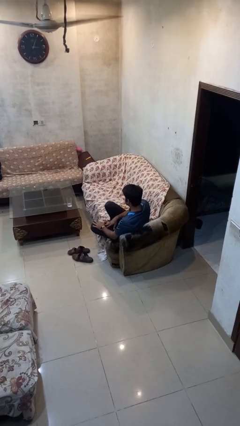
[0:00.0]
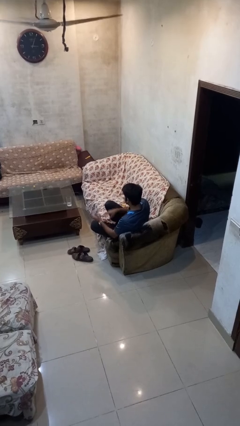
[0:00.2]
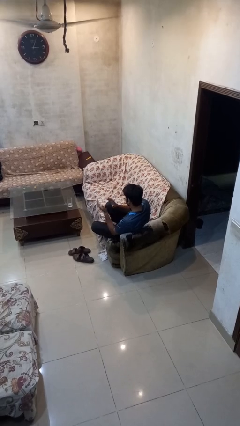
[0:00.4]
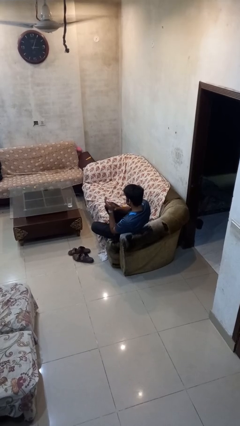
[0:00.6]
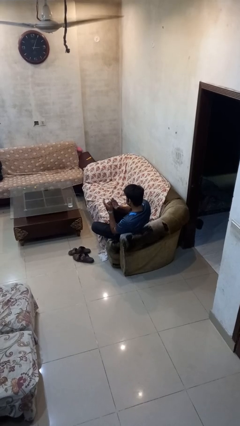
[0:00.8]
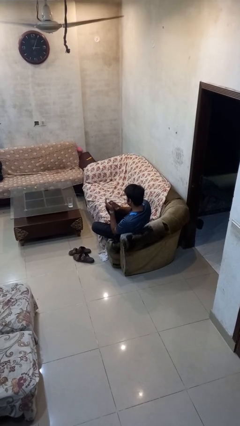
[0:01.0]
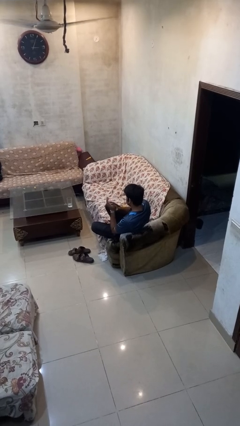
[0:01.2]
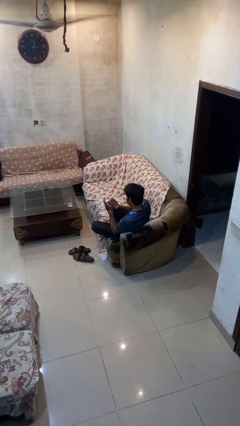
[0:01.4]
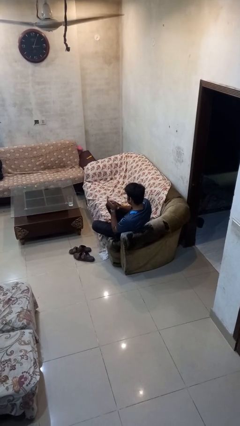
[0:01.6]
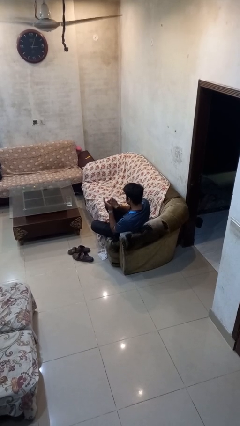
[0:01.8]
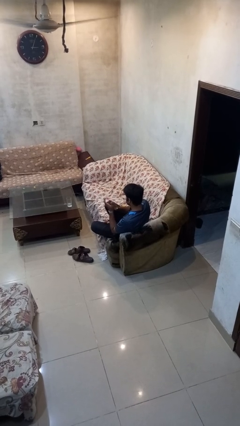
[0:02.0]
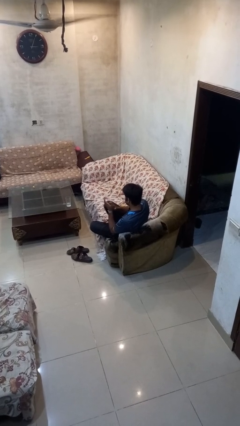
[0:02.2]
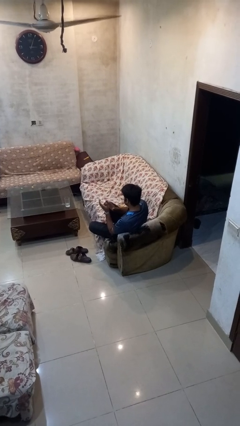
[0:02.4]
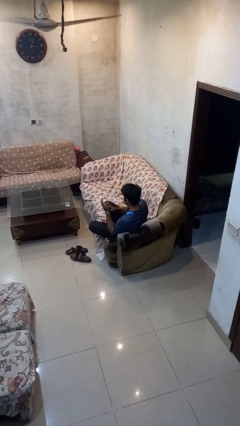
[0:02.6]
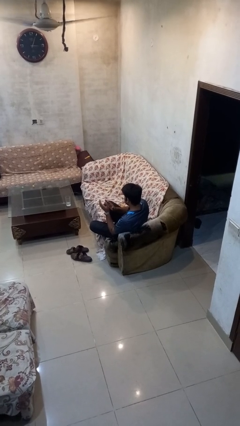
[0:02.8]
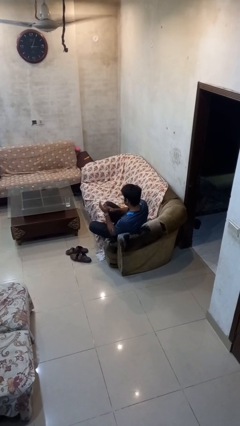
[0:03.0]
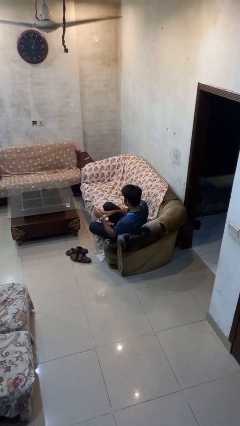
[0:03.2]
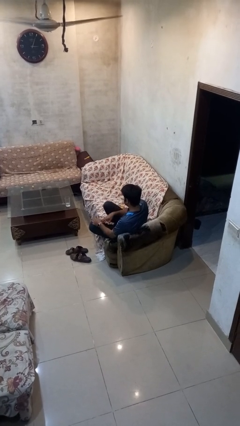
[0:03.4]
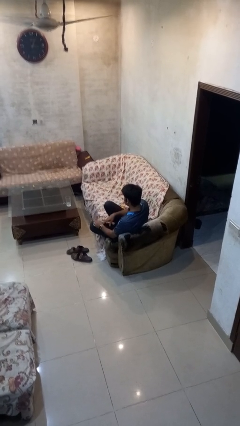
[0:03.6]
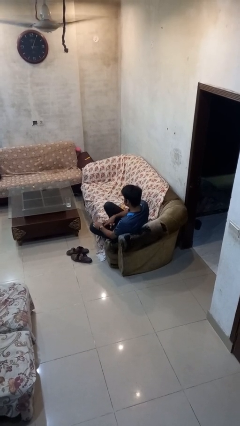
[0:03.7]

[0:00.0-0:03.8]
person claps hands

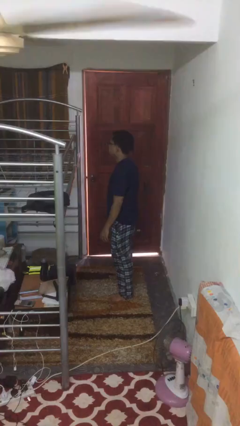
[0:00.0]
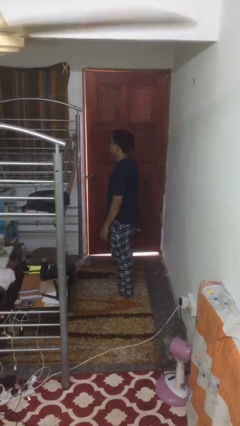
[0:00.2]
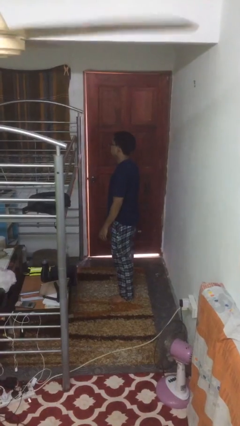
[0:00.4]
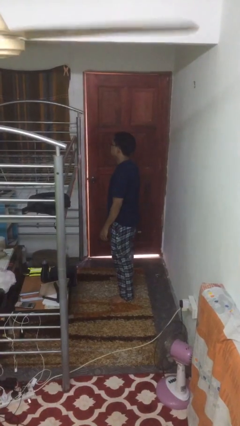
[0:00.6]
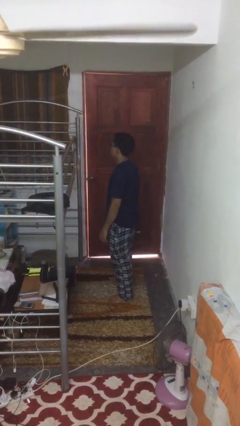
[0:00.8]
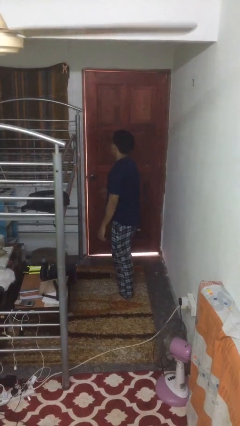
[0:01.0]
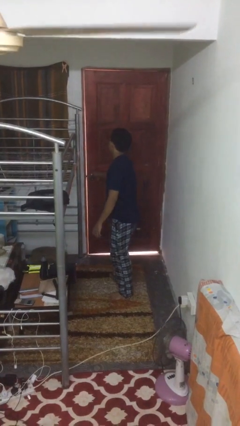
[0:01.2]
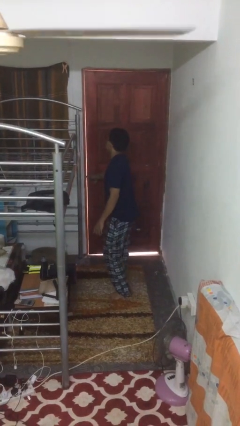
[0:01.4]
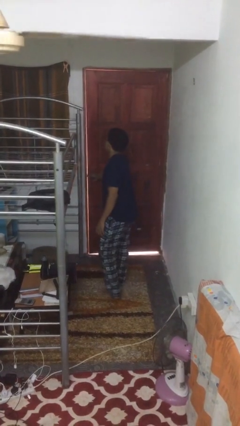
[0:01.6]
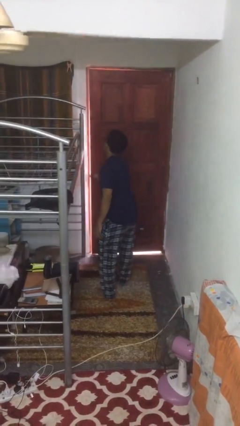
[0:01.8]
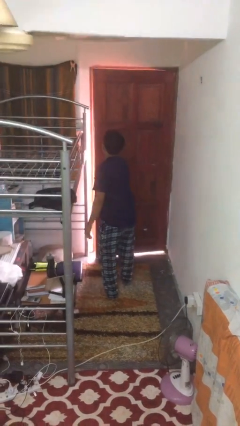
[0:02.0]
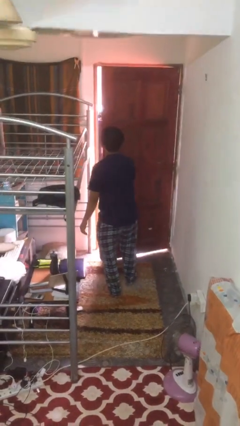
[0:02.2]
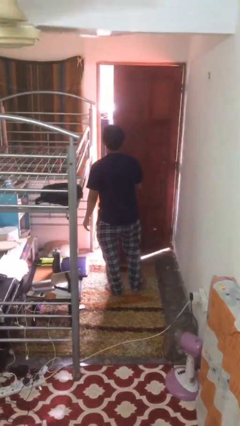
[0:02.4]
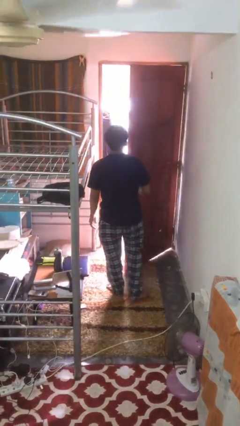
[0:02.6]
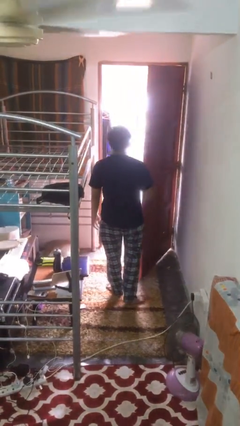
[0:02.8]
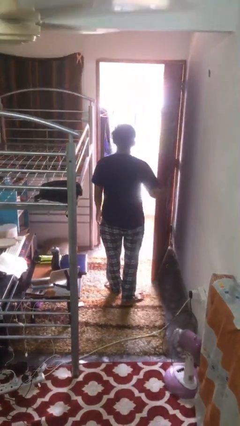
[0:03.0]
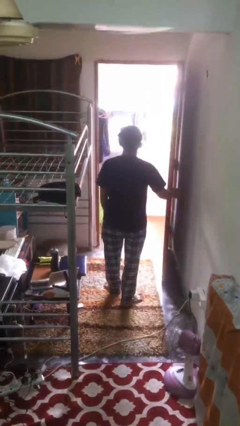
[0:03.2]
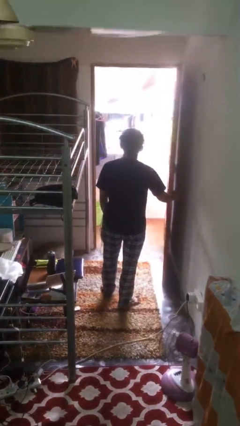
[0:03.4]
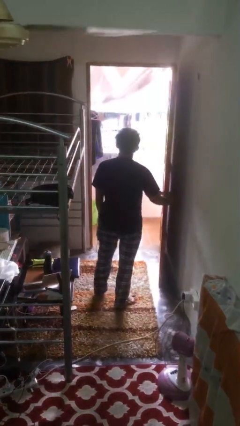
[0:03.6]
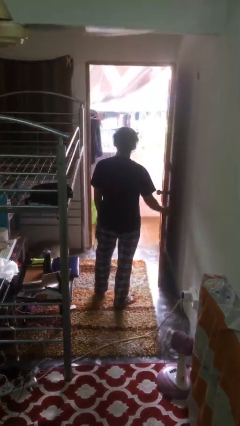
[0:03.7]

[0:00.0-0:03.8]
person opens facility door

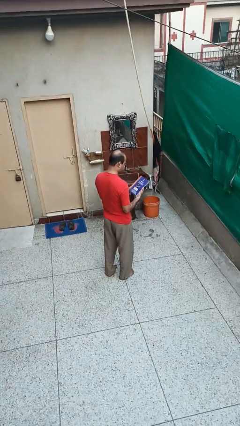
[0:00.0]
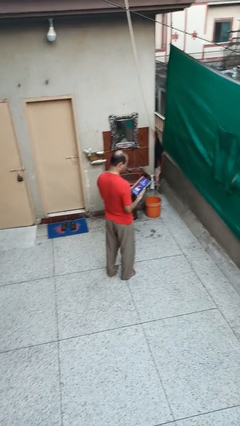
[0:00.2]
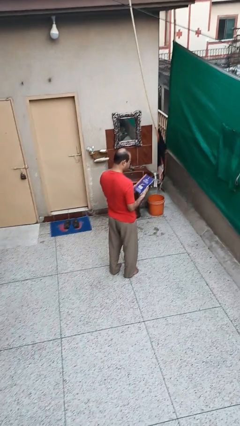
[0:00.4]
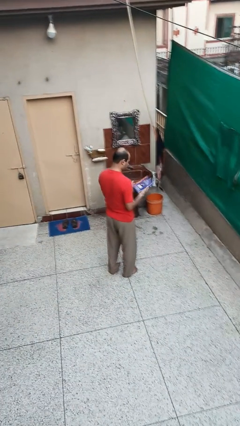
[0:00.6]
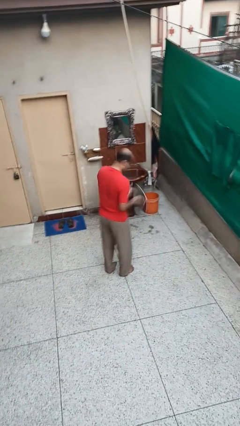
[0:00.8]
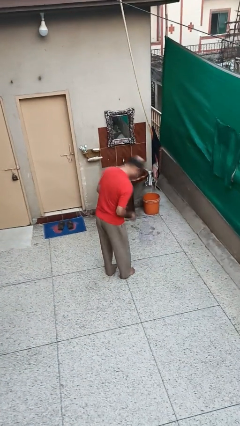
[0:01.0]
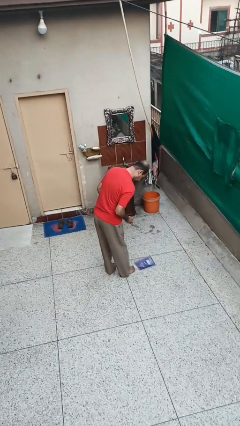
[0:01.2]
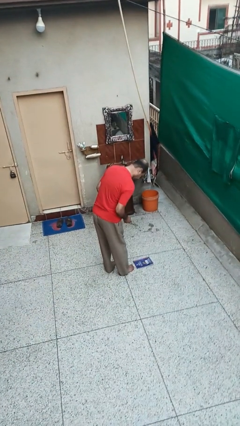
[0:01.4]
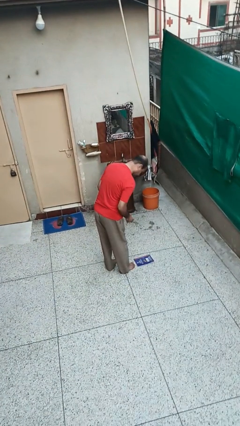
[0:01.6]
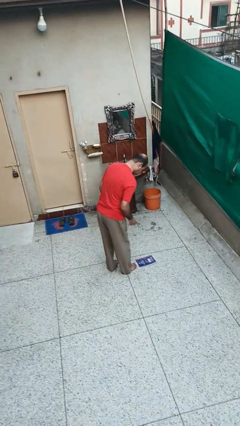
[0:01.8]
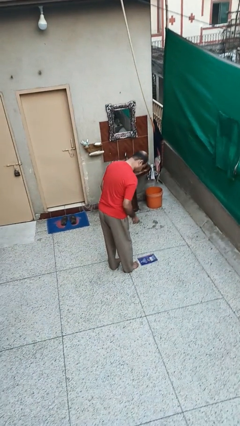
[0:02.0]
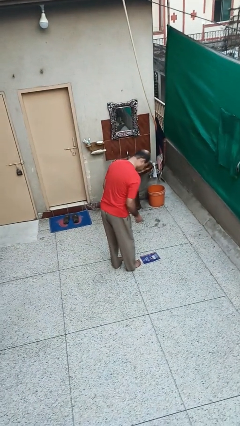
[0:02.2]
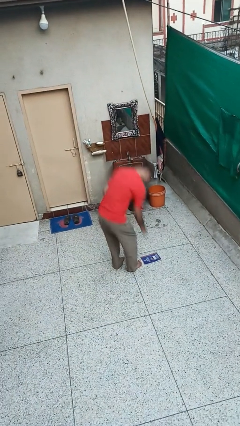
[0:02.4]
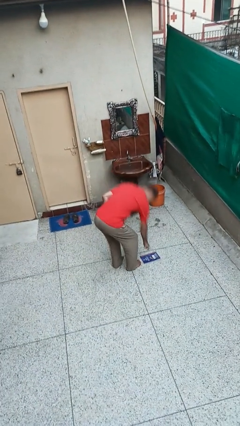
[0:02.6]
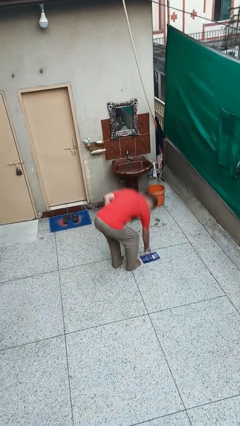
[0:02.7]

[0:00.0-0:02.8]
person trips on object on floor

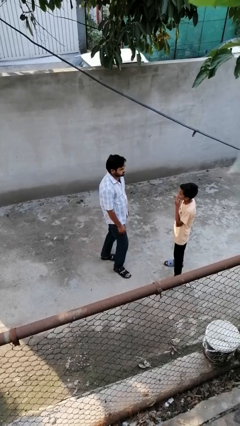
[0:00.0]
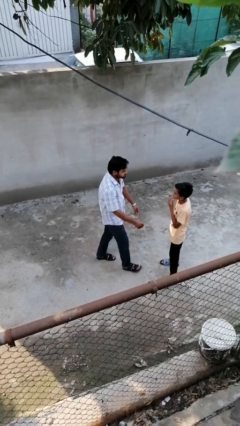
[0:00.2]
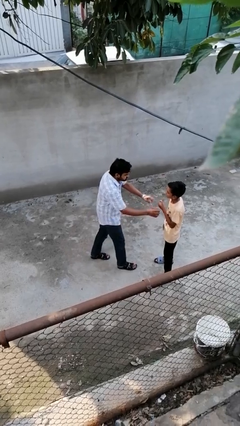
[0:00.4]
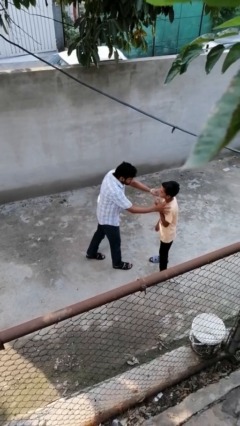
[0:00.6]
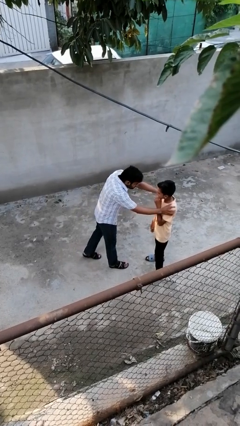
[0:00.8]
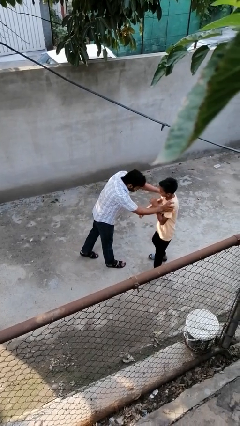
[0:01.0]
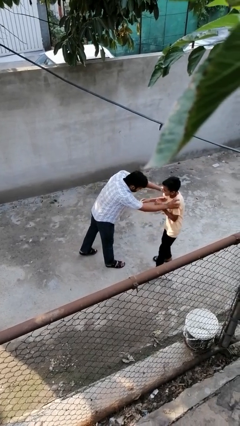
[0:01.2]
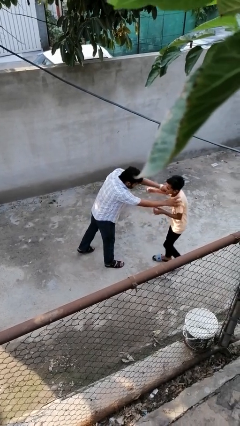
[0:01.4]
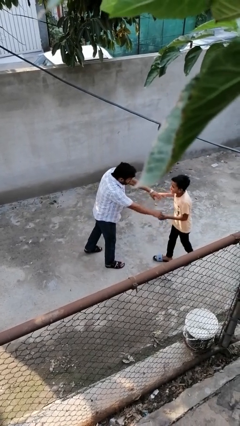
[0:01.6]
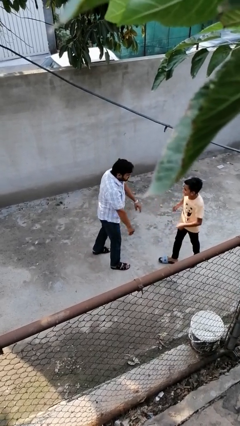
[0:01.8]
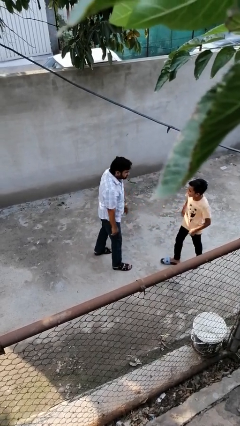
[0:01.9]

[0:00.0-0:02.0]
person shoves person

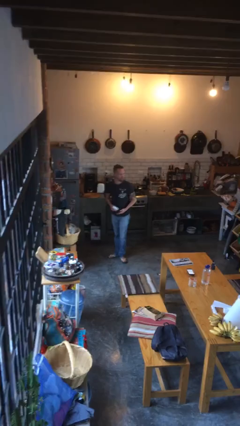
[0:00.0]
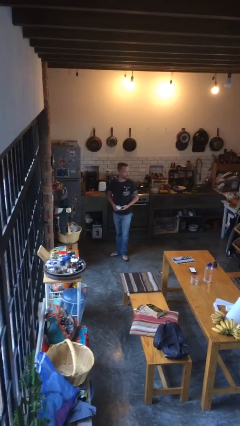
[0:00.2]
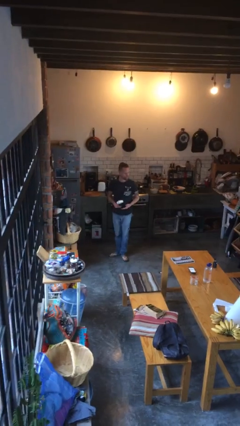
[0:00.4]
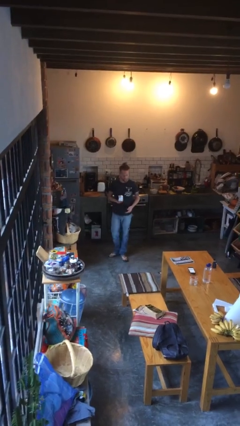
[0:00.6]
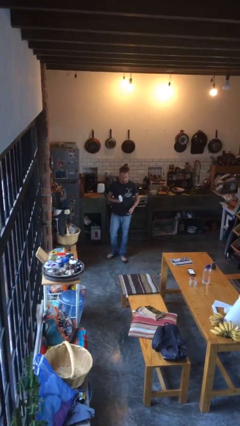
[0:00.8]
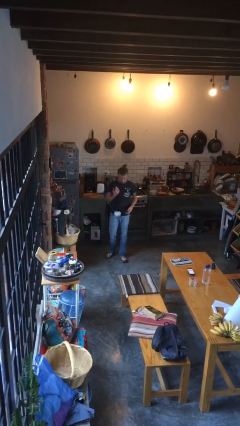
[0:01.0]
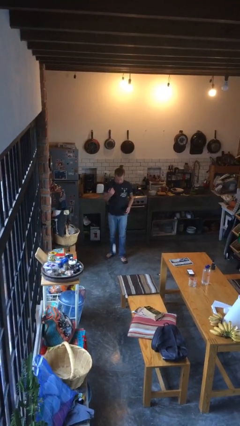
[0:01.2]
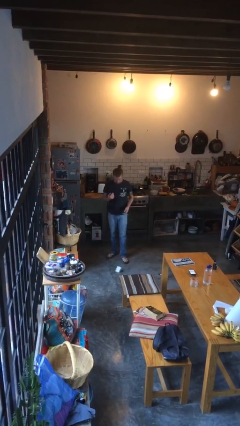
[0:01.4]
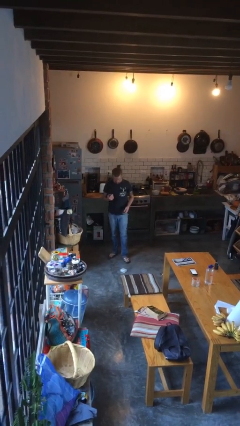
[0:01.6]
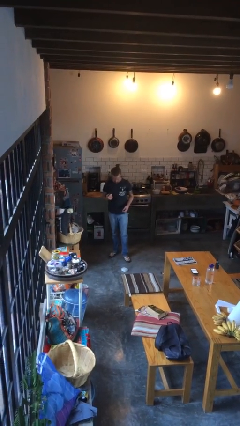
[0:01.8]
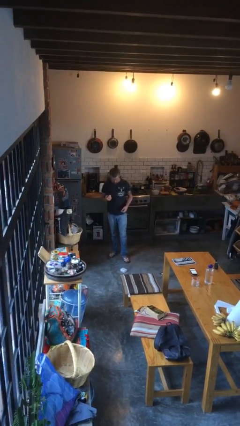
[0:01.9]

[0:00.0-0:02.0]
person drops object

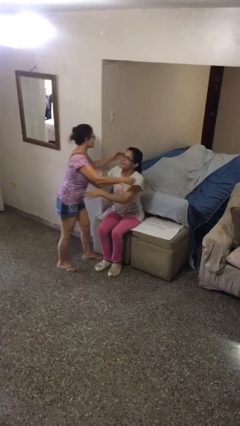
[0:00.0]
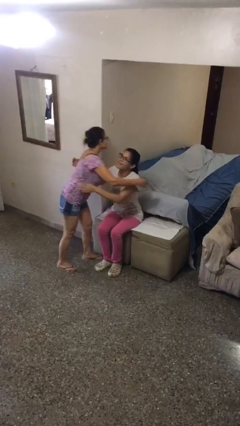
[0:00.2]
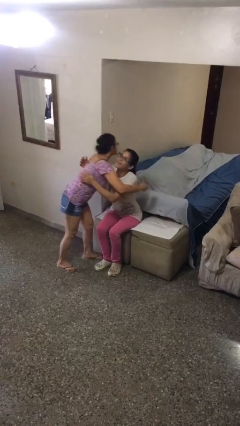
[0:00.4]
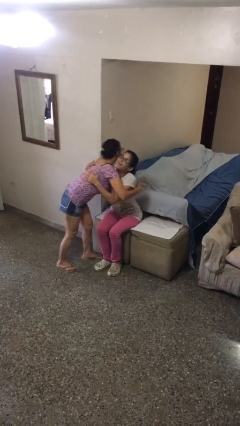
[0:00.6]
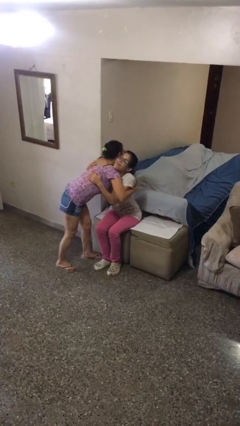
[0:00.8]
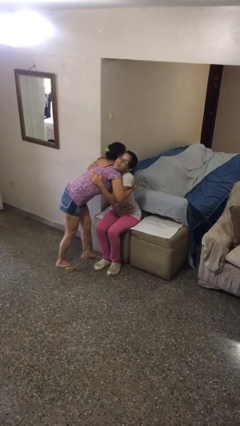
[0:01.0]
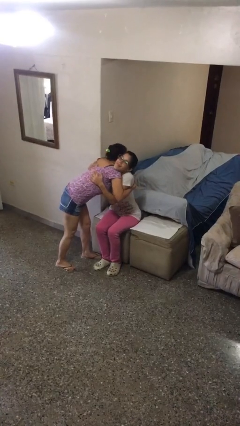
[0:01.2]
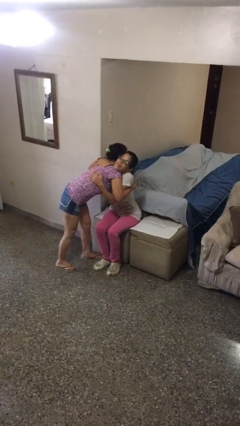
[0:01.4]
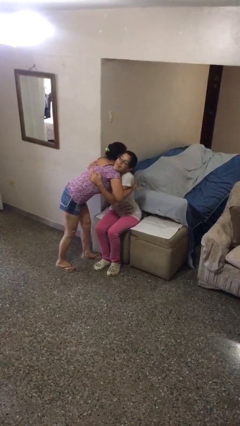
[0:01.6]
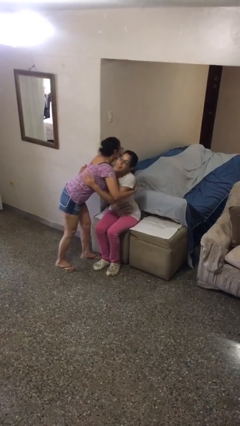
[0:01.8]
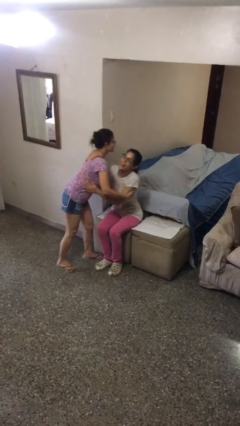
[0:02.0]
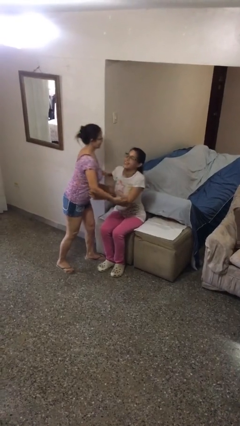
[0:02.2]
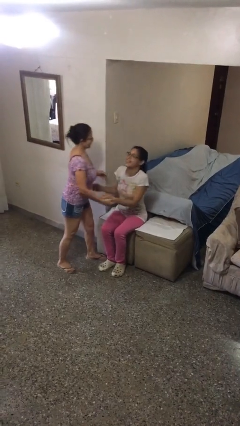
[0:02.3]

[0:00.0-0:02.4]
person embraces person

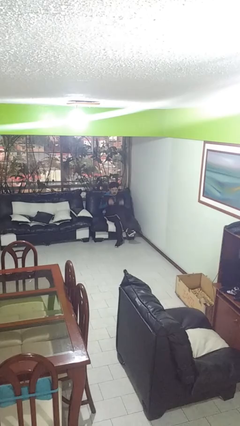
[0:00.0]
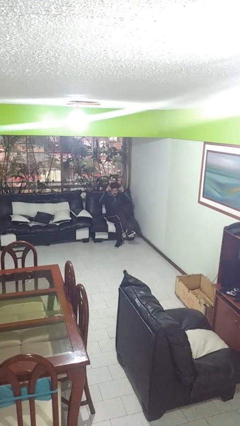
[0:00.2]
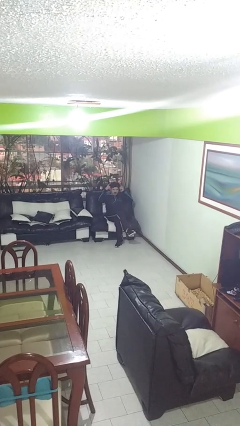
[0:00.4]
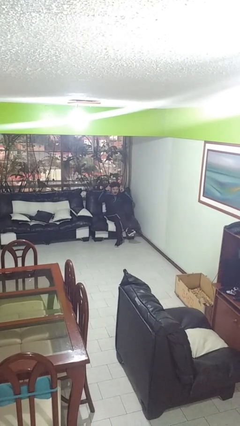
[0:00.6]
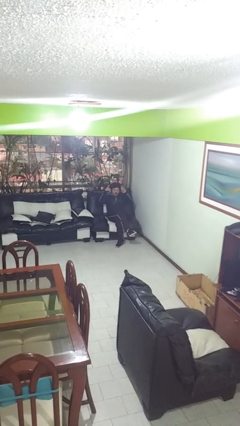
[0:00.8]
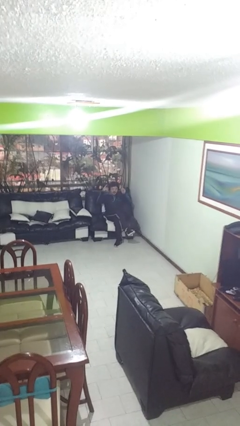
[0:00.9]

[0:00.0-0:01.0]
person puts on headphones
